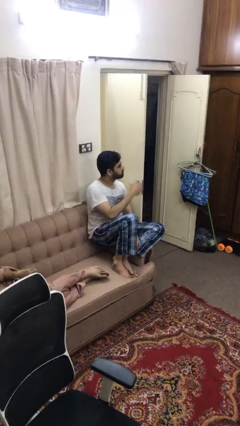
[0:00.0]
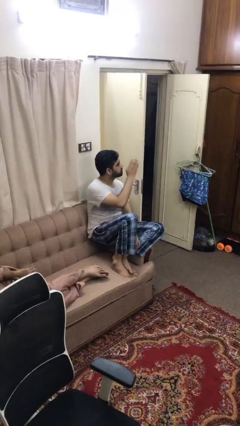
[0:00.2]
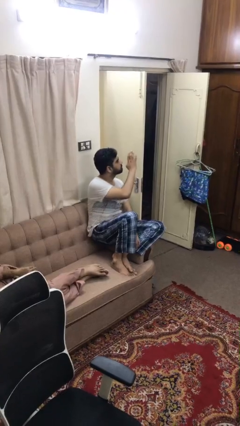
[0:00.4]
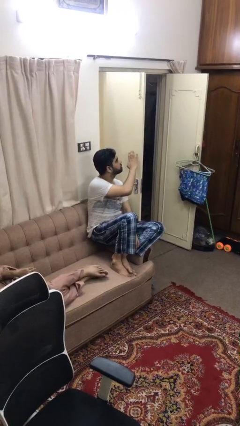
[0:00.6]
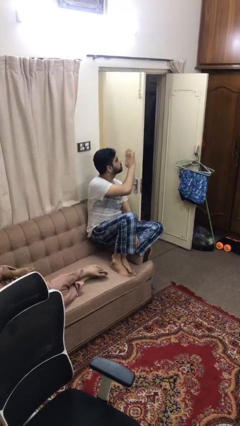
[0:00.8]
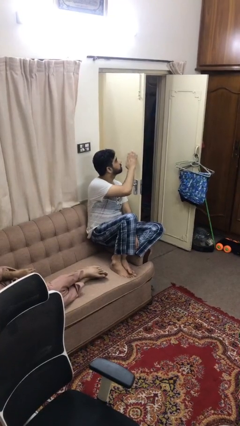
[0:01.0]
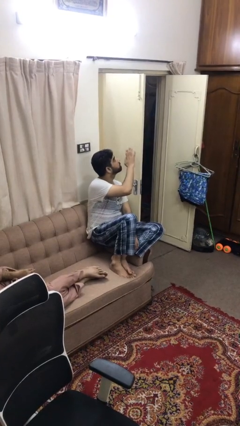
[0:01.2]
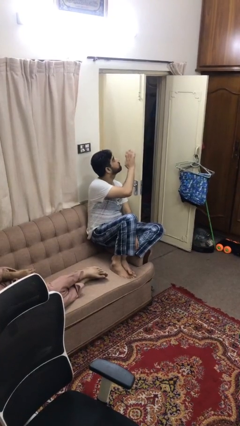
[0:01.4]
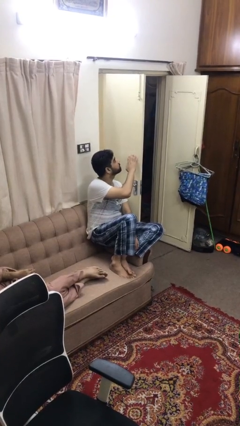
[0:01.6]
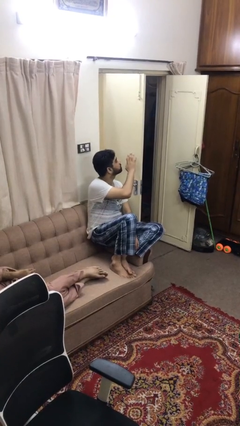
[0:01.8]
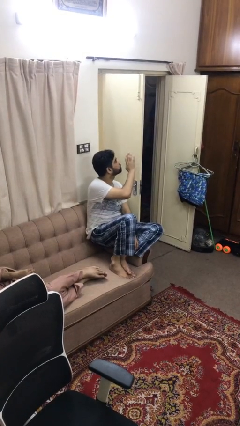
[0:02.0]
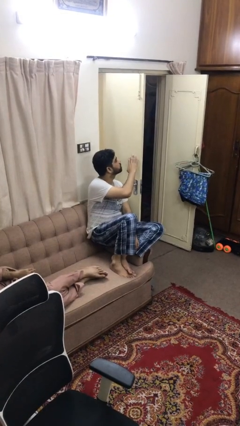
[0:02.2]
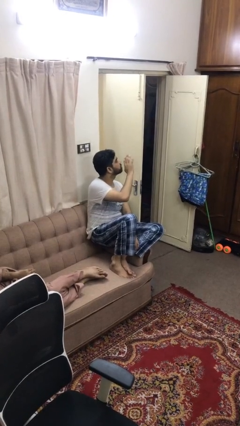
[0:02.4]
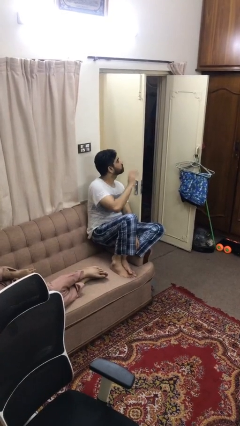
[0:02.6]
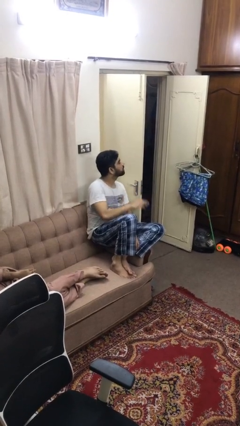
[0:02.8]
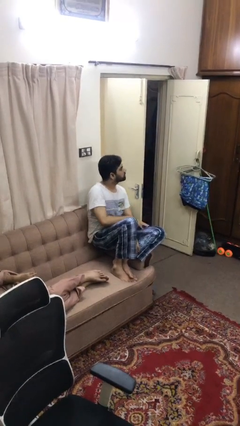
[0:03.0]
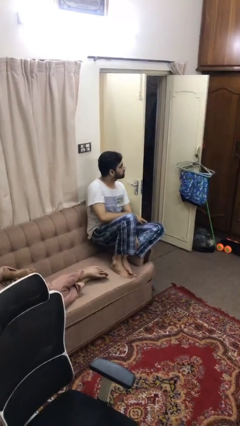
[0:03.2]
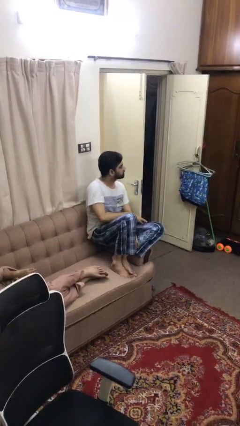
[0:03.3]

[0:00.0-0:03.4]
person taps object with finger

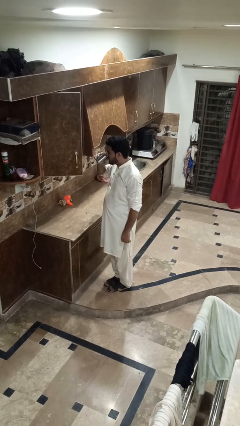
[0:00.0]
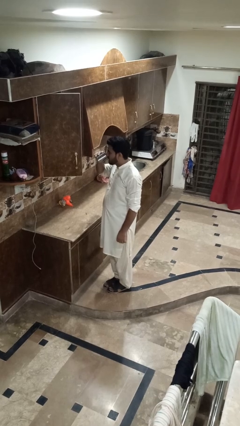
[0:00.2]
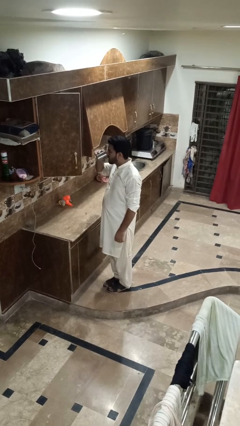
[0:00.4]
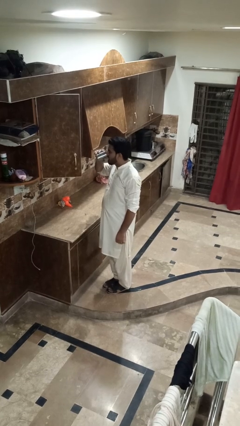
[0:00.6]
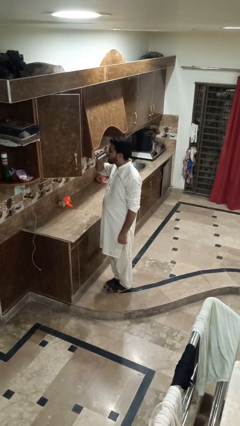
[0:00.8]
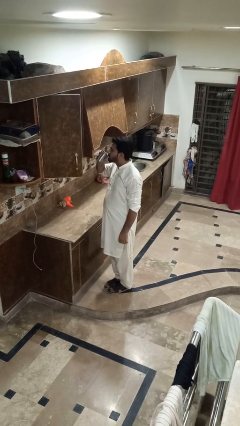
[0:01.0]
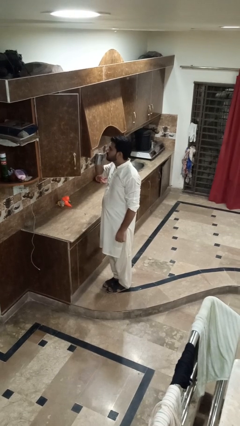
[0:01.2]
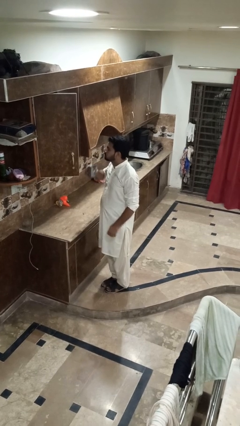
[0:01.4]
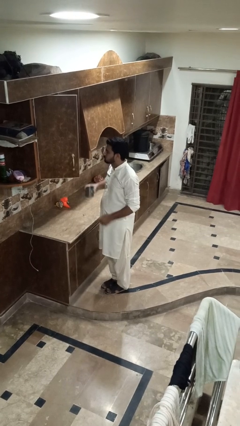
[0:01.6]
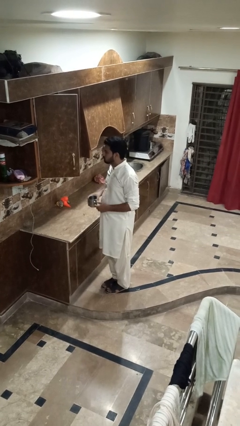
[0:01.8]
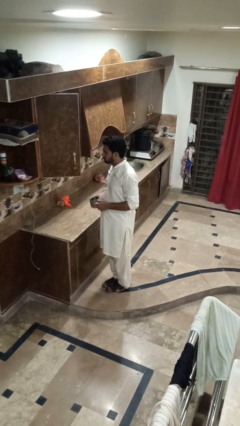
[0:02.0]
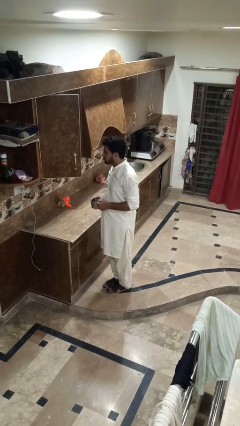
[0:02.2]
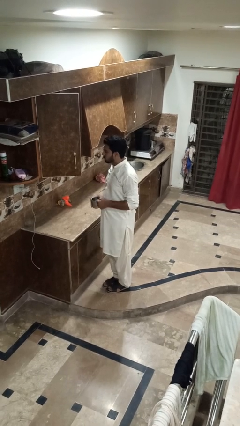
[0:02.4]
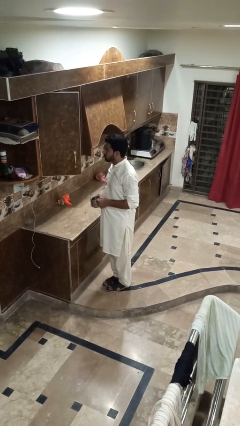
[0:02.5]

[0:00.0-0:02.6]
person drinks from cup

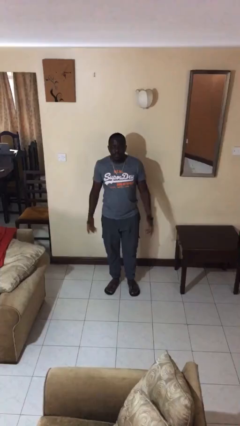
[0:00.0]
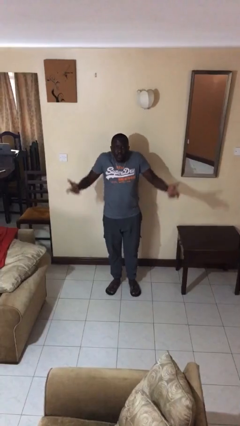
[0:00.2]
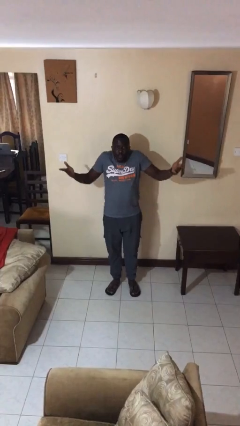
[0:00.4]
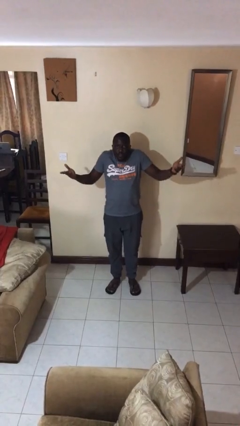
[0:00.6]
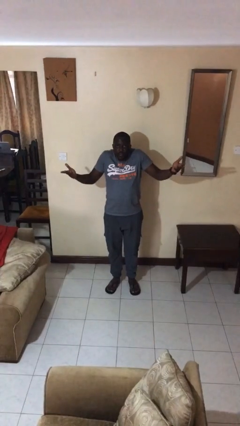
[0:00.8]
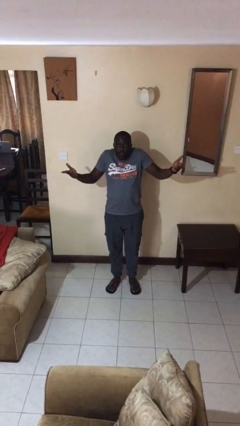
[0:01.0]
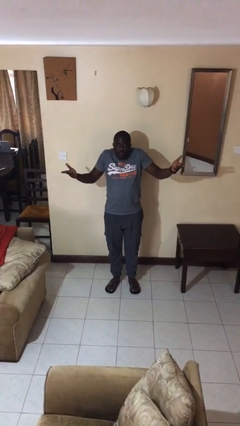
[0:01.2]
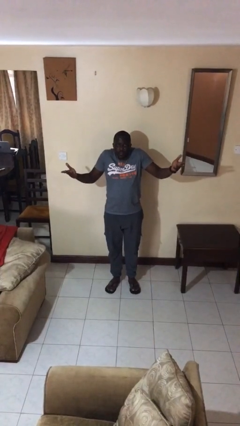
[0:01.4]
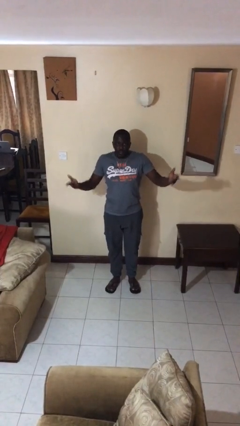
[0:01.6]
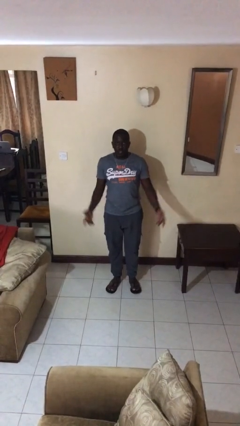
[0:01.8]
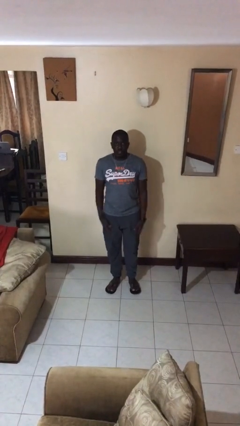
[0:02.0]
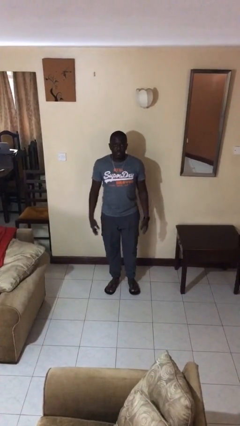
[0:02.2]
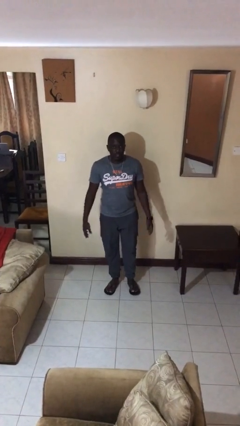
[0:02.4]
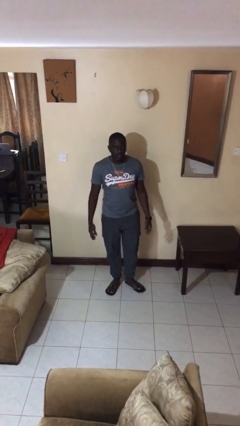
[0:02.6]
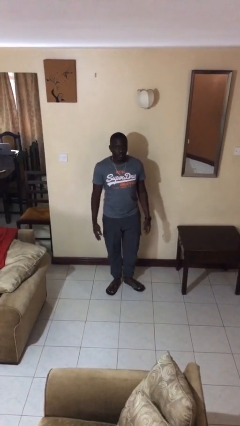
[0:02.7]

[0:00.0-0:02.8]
person shrugs

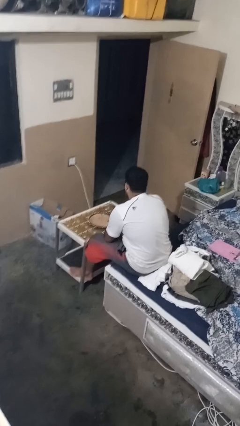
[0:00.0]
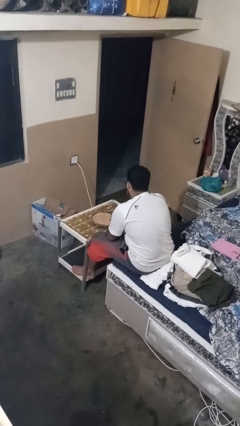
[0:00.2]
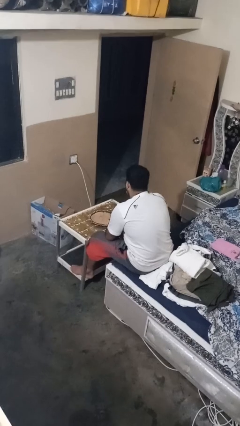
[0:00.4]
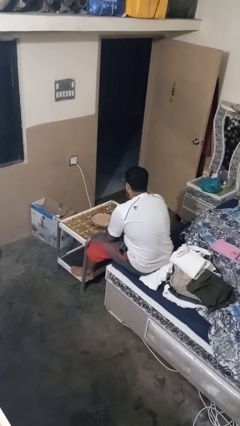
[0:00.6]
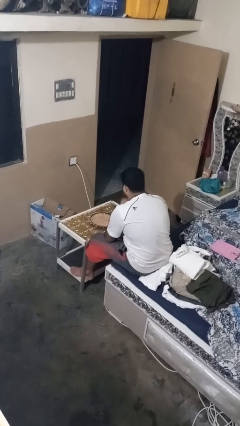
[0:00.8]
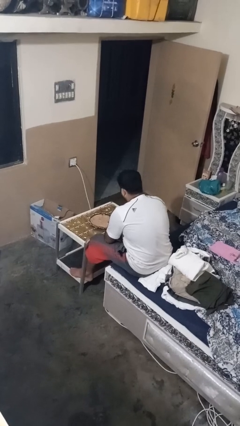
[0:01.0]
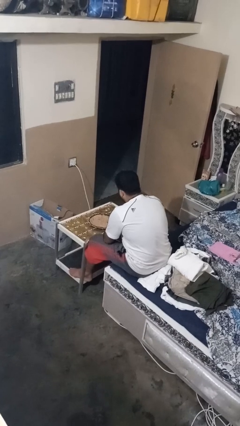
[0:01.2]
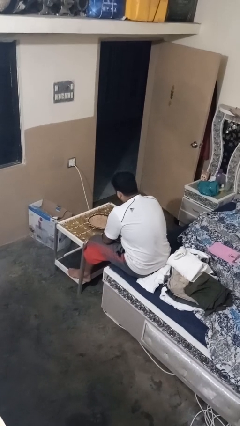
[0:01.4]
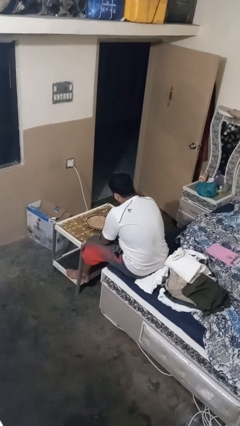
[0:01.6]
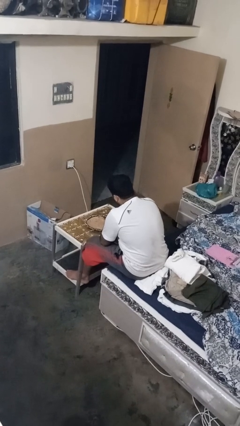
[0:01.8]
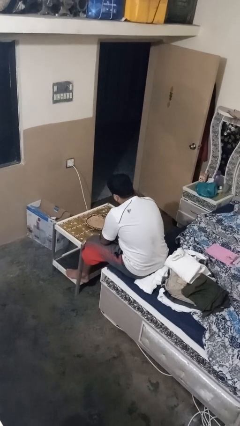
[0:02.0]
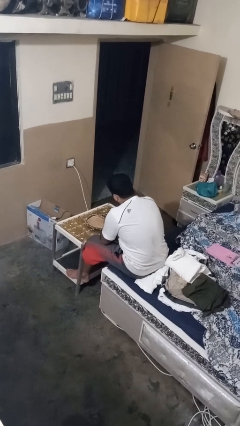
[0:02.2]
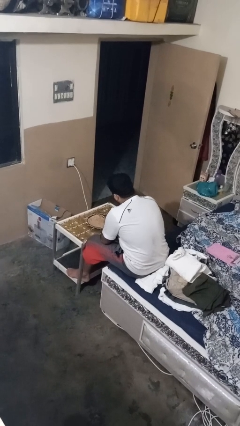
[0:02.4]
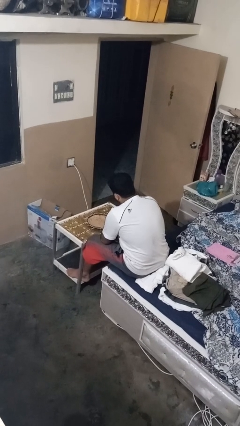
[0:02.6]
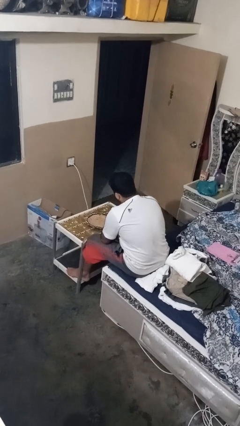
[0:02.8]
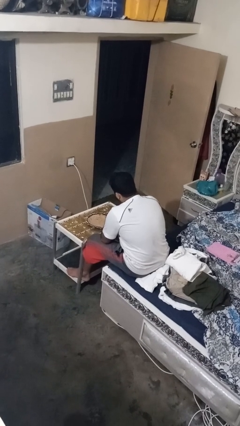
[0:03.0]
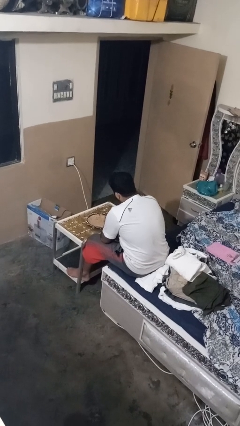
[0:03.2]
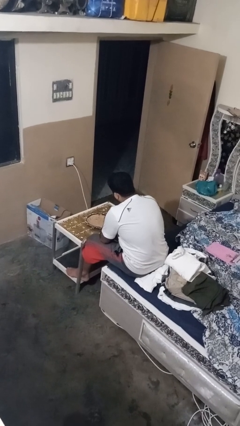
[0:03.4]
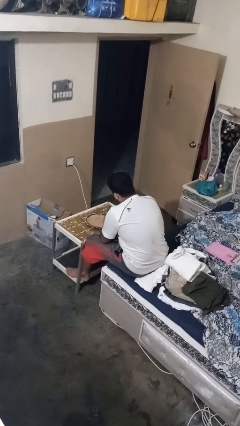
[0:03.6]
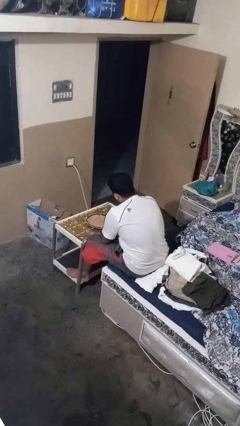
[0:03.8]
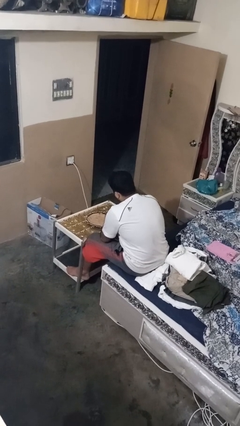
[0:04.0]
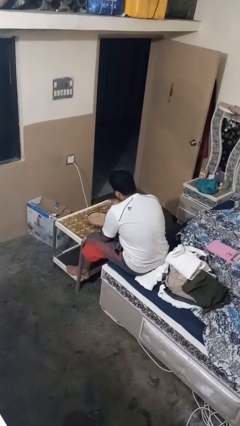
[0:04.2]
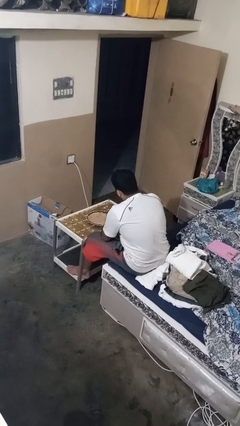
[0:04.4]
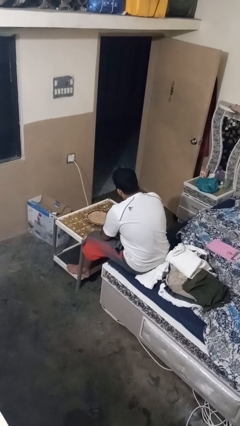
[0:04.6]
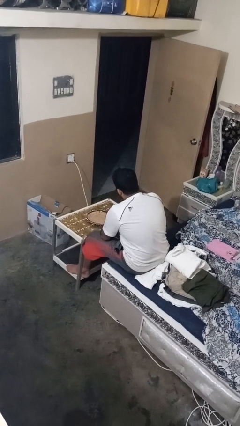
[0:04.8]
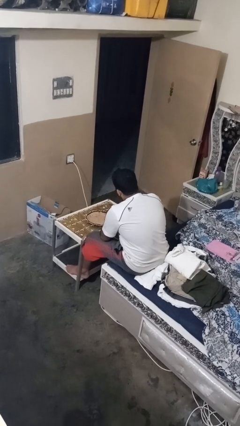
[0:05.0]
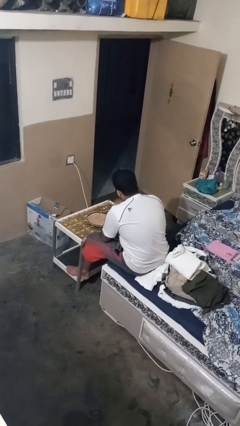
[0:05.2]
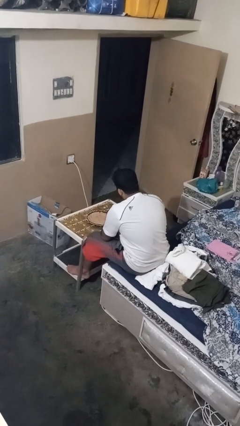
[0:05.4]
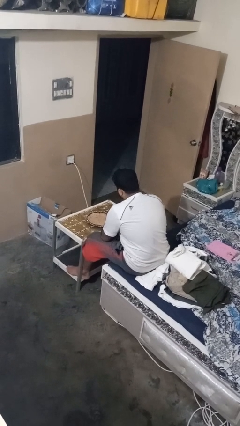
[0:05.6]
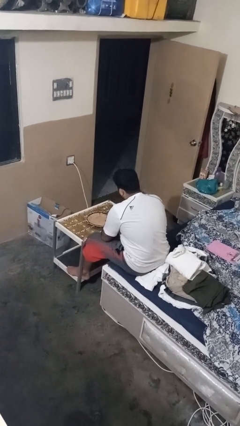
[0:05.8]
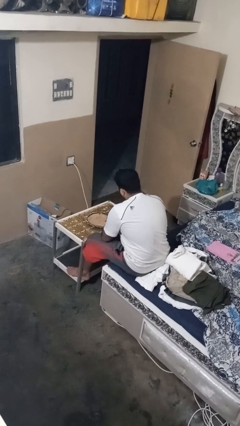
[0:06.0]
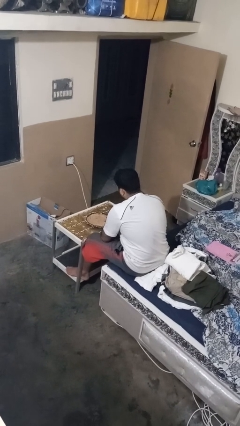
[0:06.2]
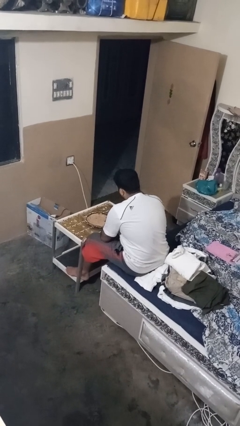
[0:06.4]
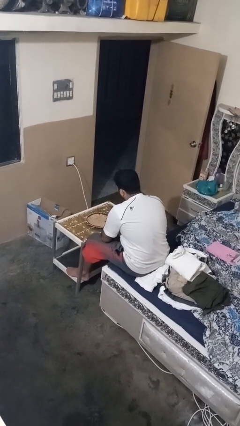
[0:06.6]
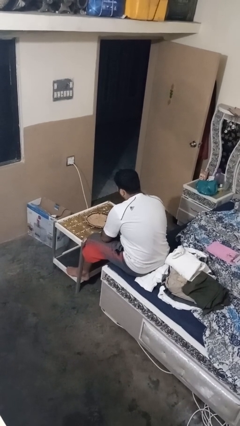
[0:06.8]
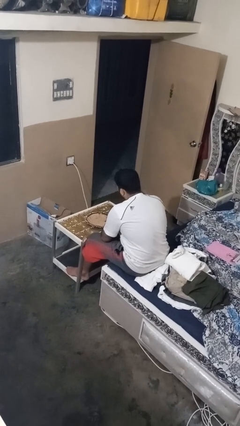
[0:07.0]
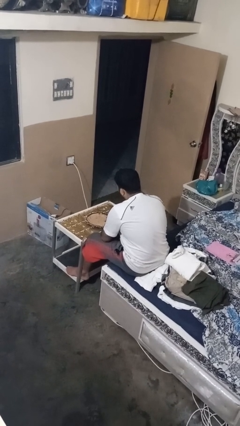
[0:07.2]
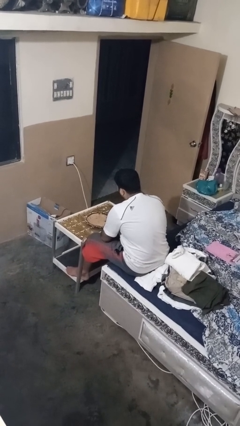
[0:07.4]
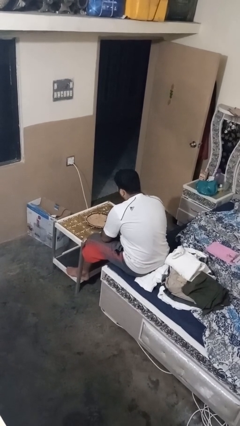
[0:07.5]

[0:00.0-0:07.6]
person eats with hands

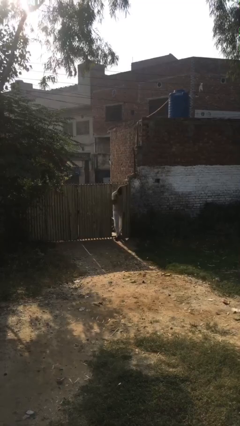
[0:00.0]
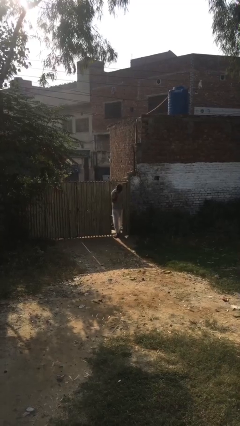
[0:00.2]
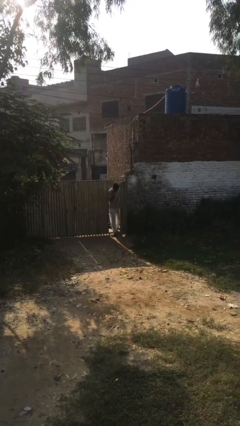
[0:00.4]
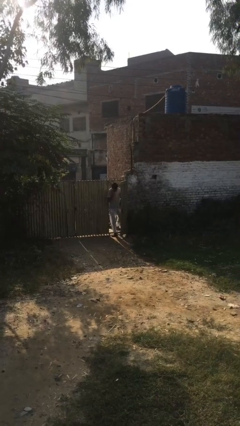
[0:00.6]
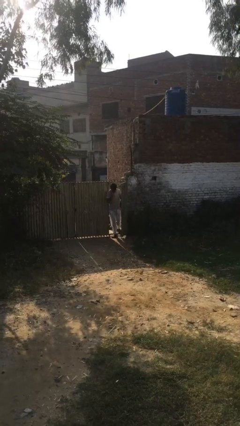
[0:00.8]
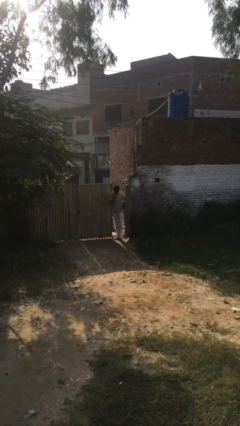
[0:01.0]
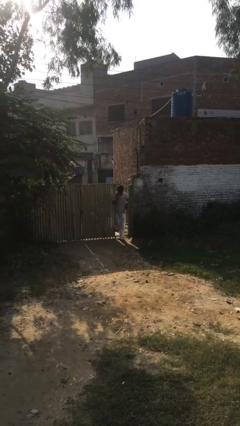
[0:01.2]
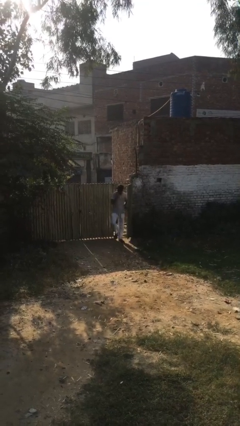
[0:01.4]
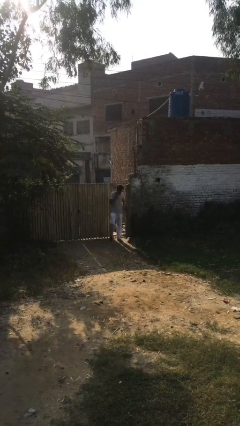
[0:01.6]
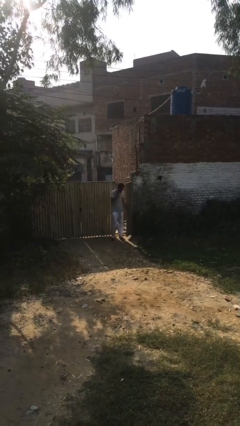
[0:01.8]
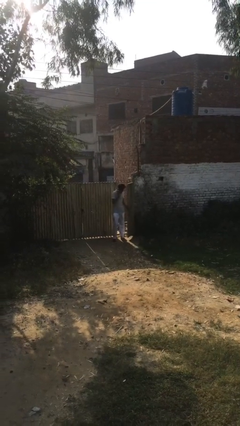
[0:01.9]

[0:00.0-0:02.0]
person enters scene through structure
